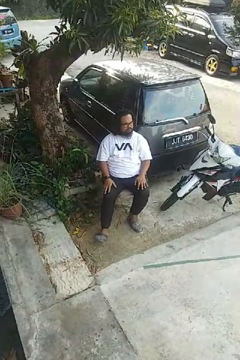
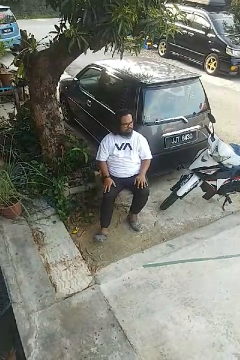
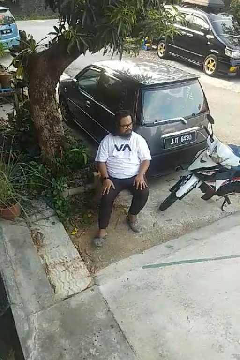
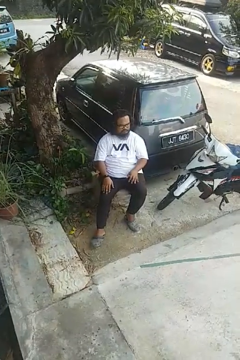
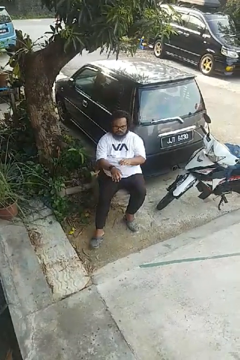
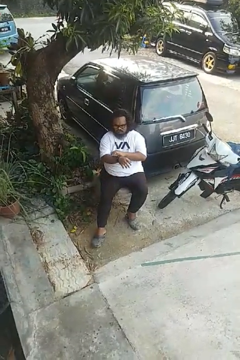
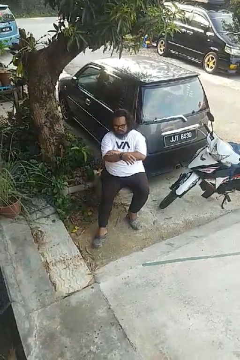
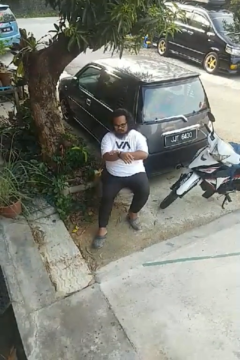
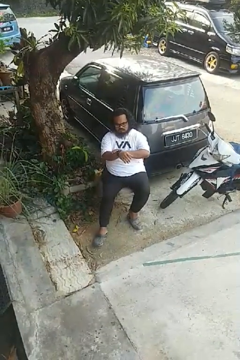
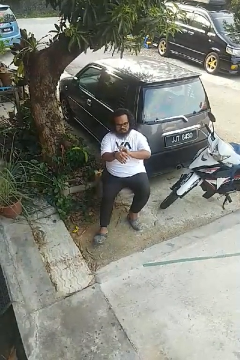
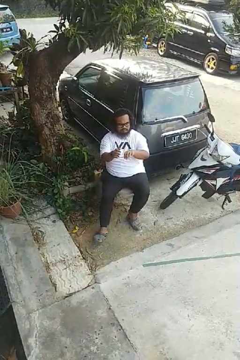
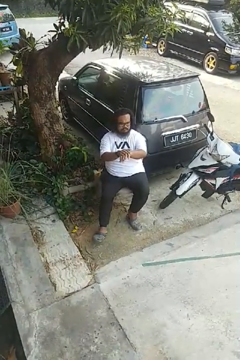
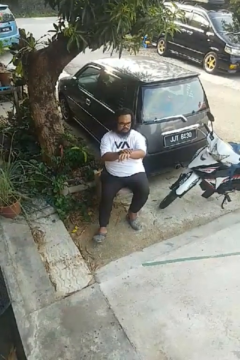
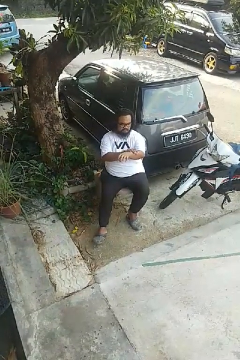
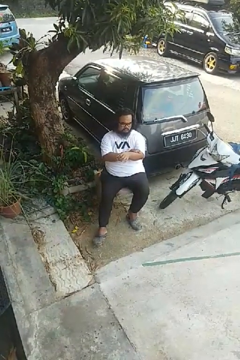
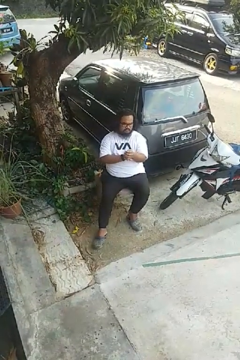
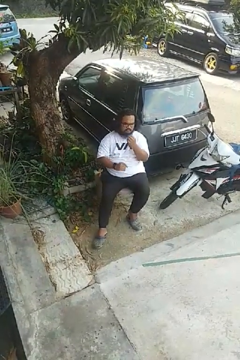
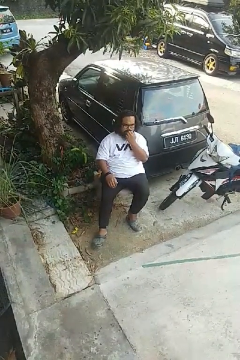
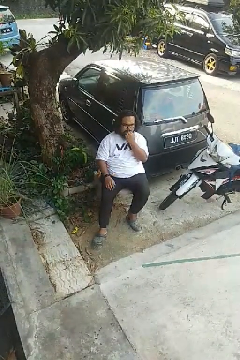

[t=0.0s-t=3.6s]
person looks at hands in lap

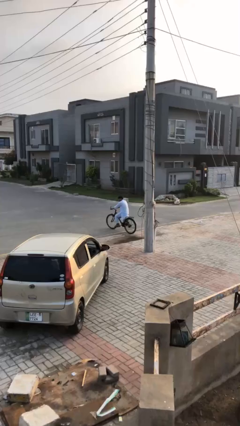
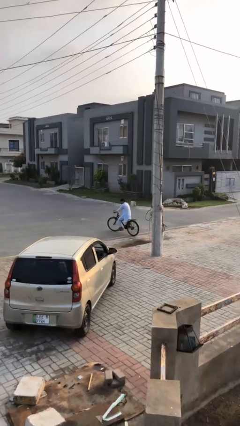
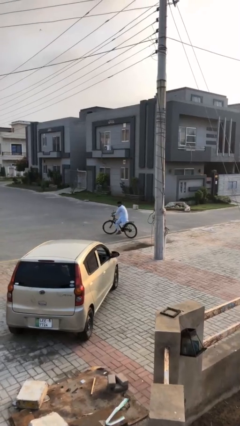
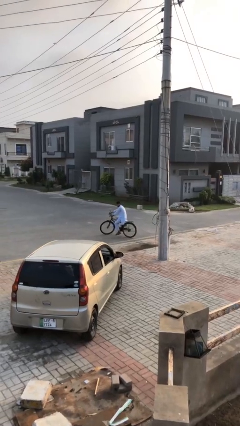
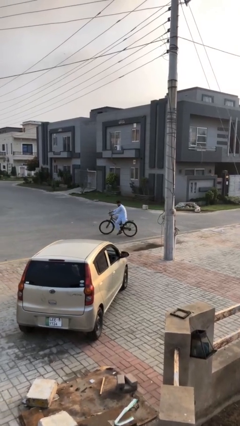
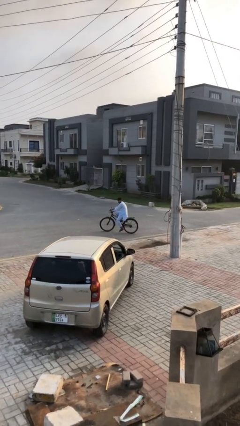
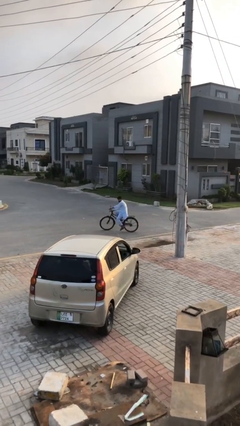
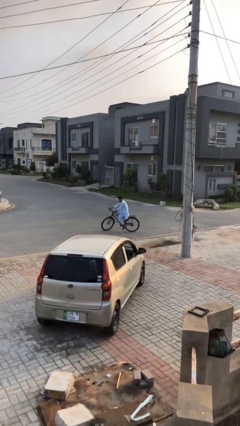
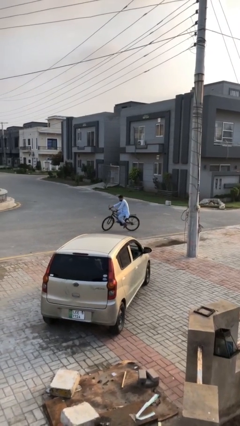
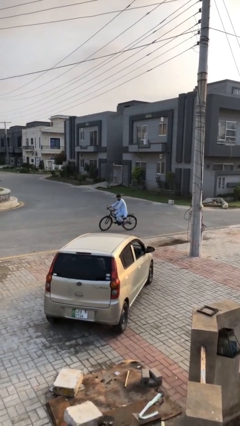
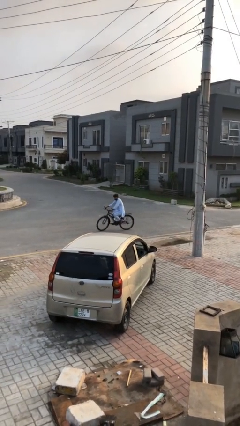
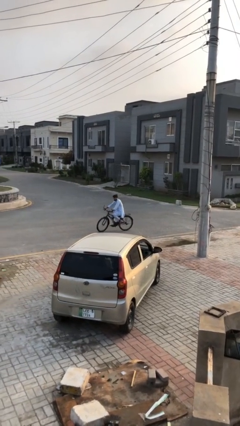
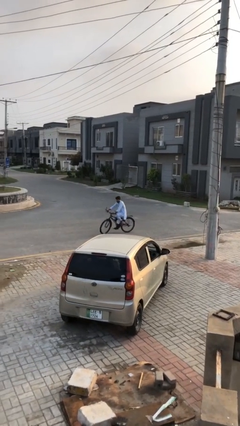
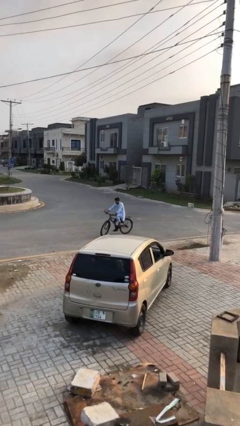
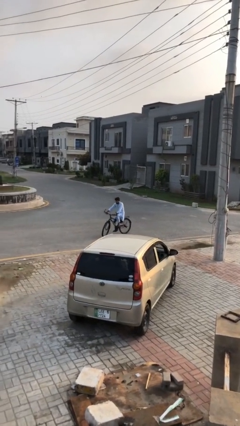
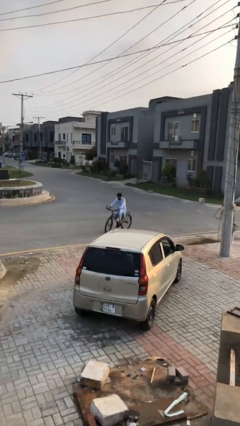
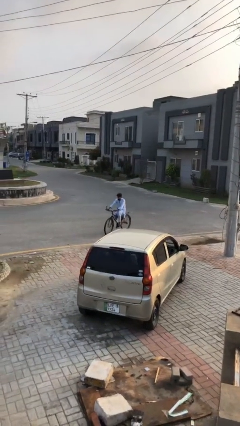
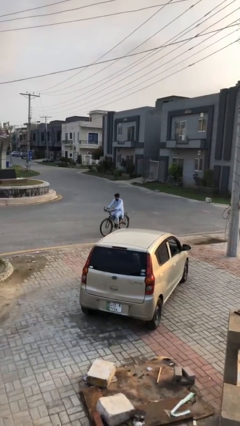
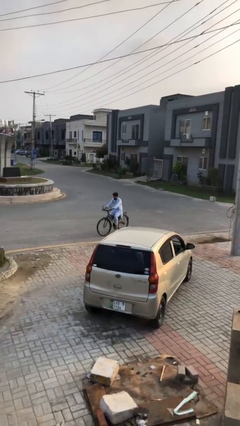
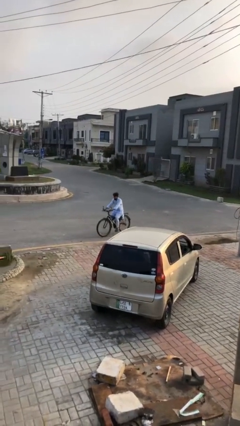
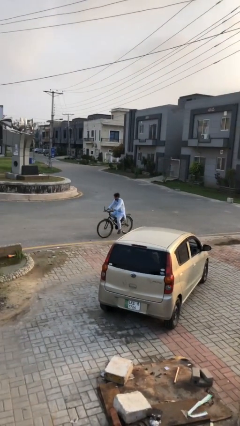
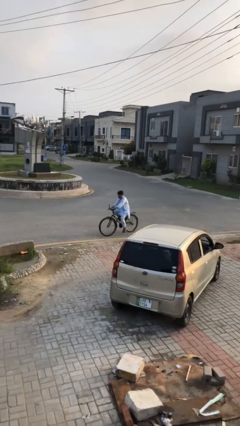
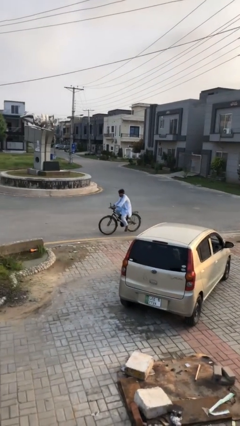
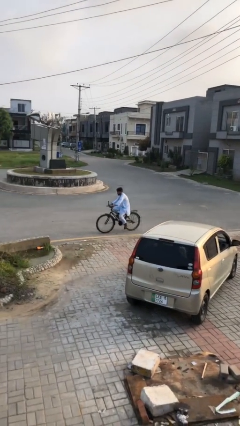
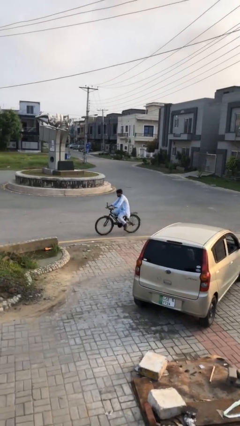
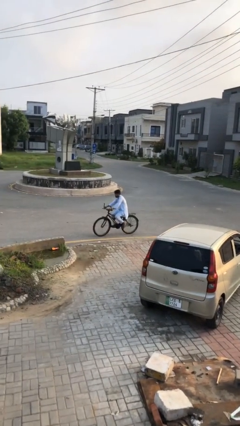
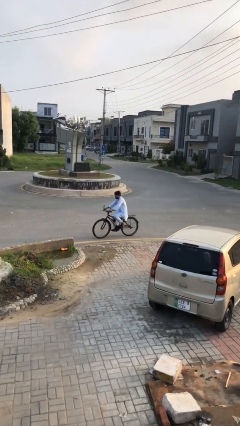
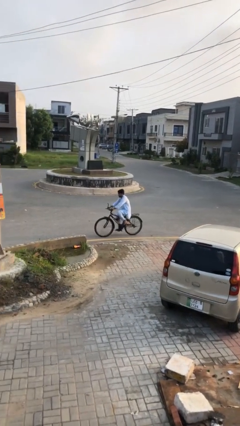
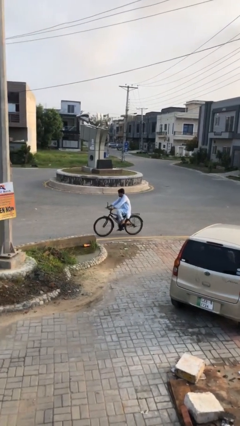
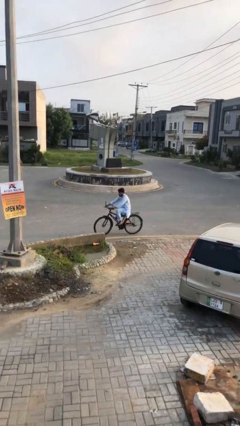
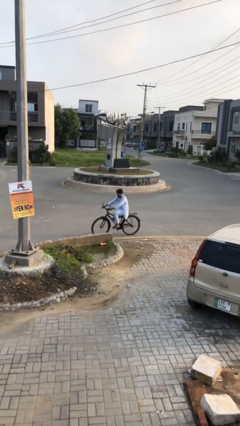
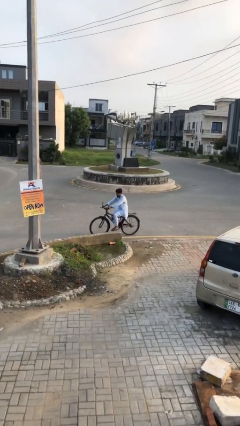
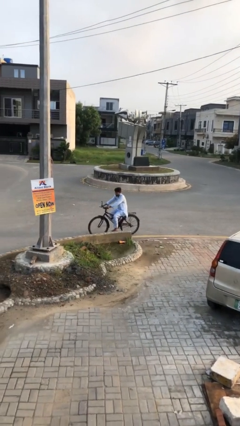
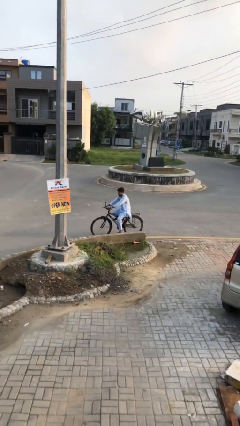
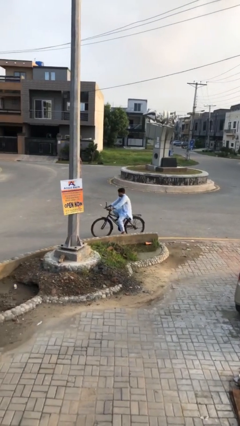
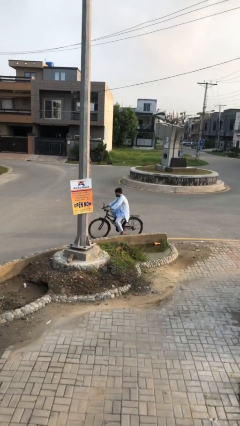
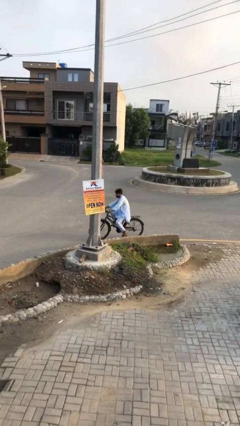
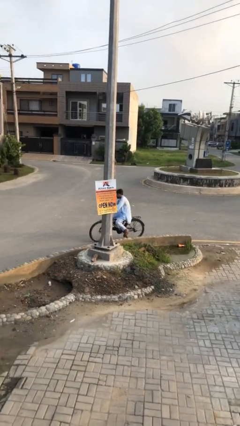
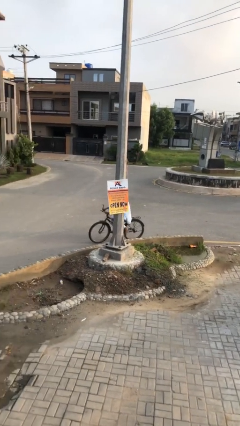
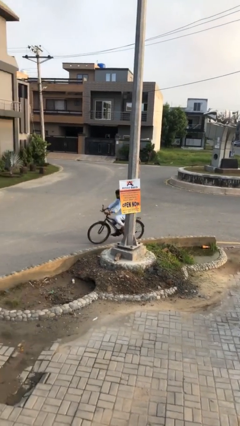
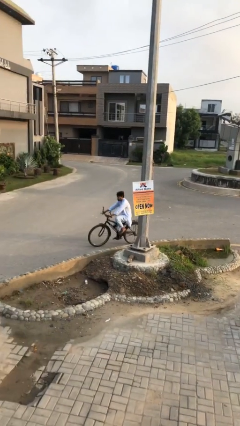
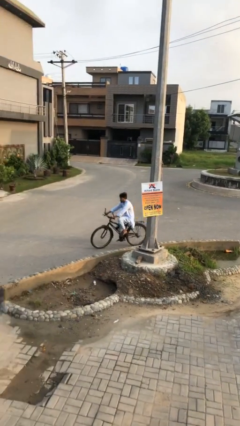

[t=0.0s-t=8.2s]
person rides bicycle

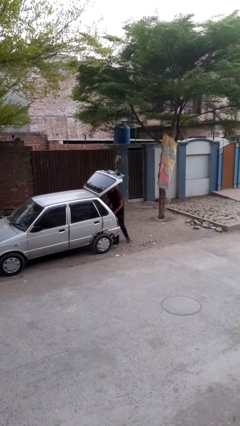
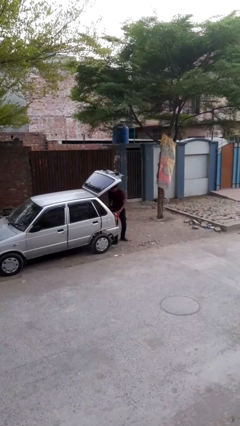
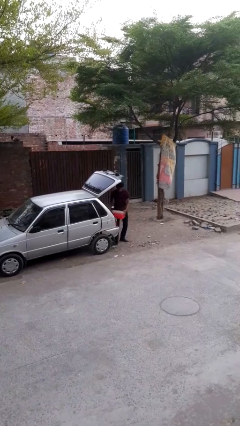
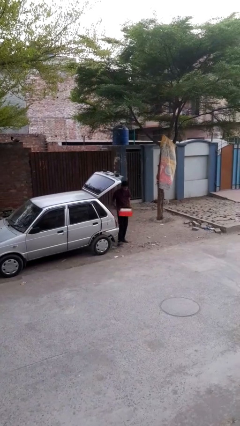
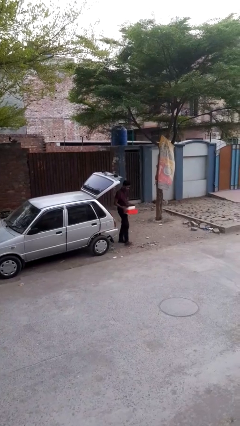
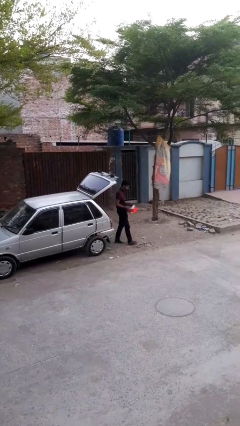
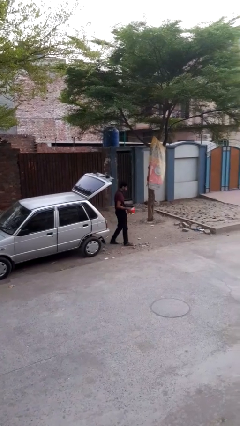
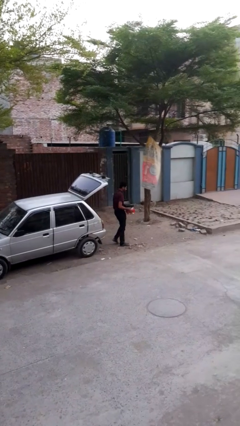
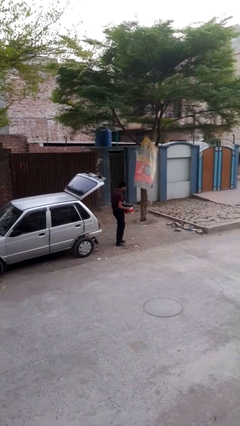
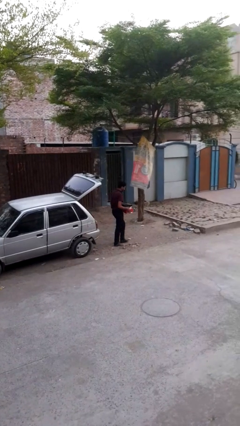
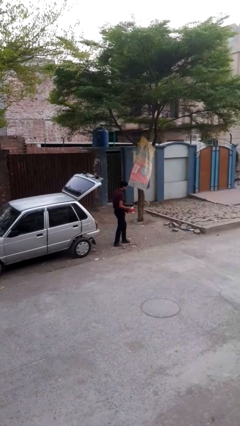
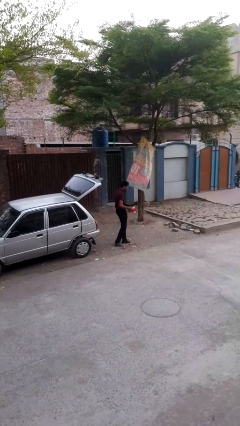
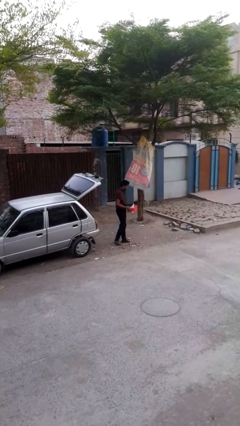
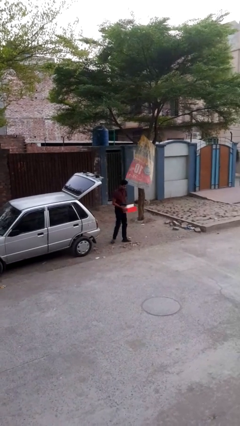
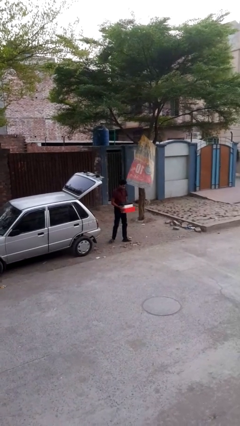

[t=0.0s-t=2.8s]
person unloads car

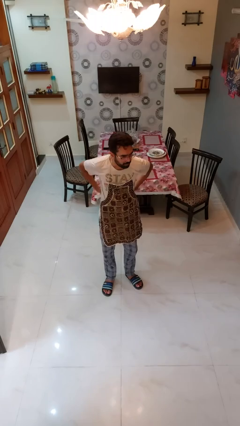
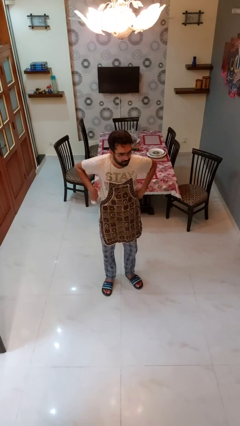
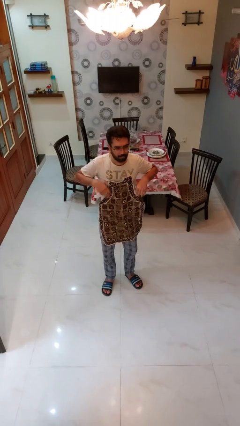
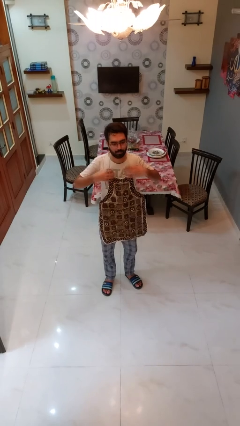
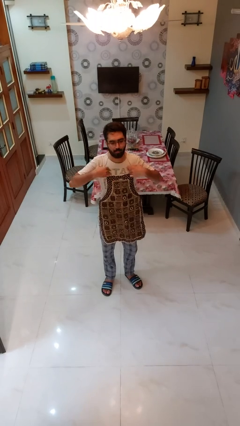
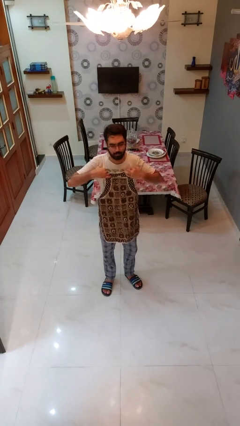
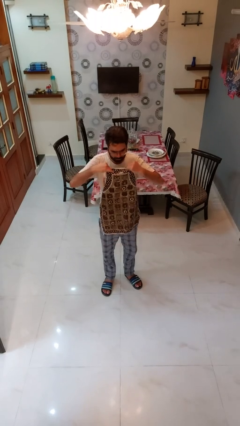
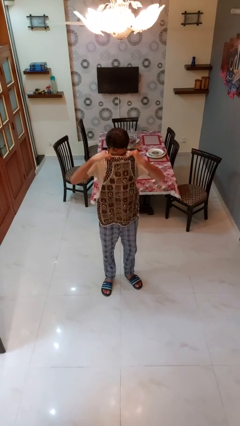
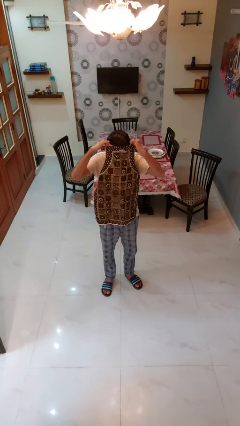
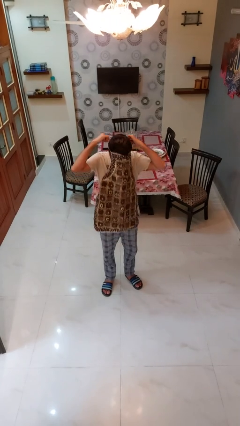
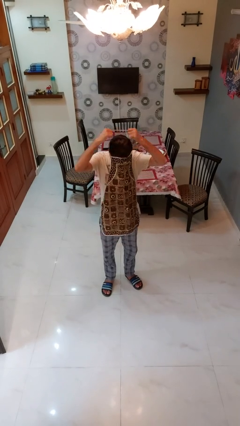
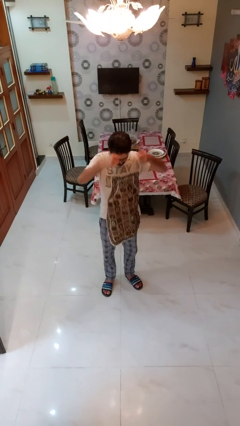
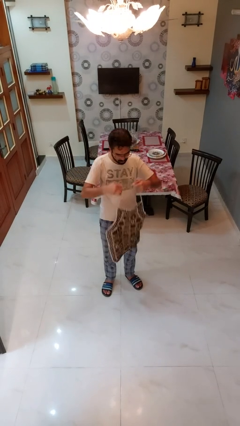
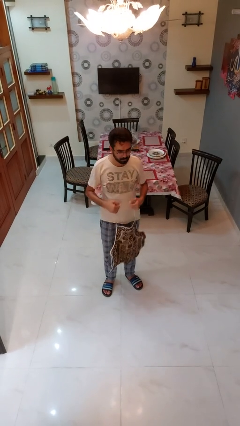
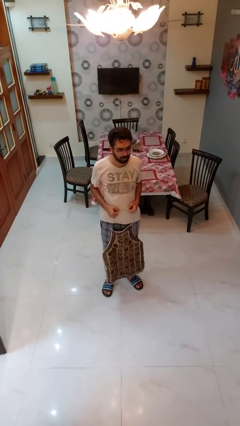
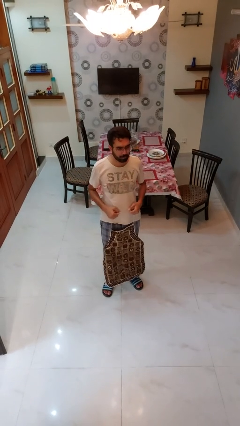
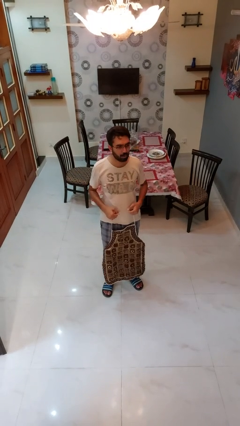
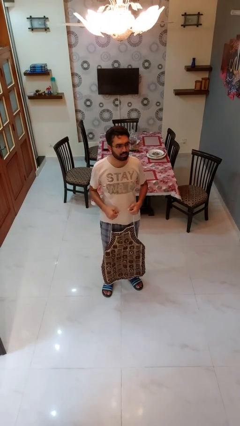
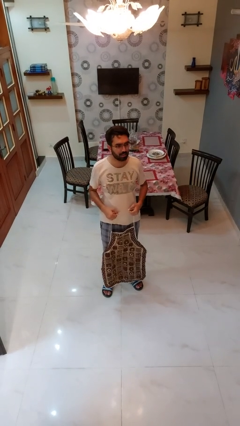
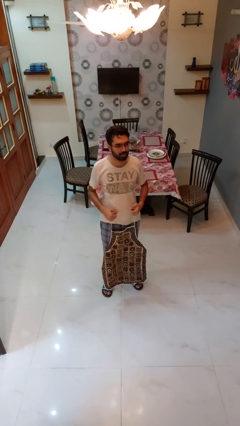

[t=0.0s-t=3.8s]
person takes off apron
